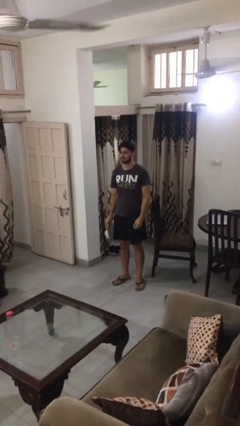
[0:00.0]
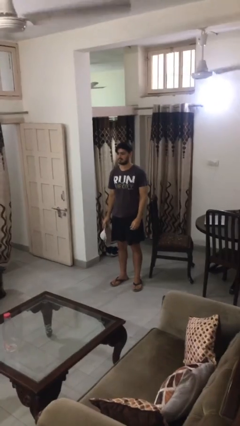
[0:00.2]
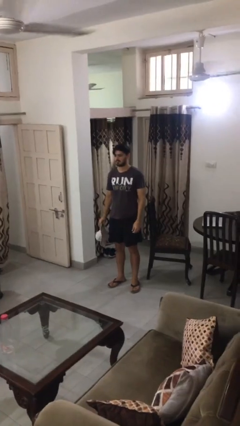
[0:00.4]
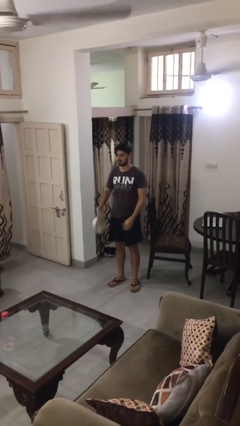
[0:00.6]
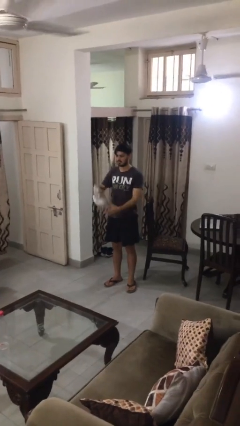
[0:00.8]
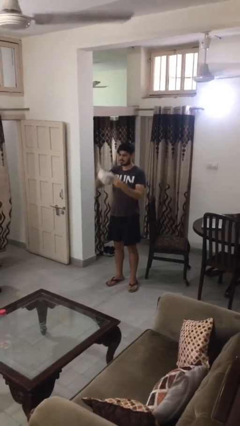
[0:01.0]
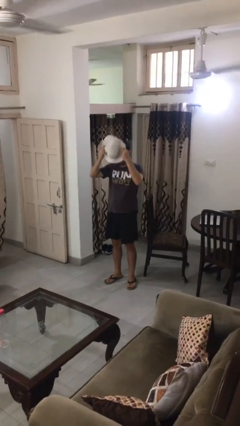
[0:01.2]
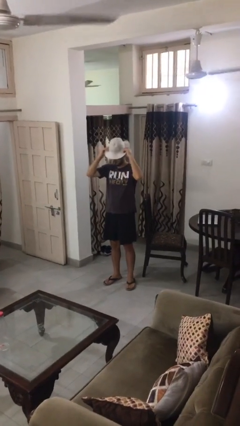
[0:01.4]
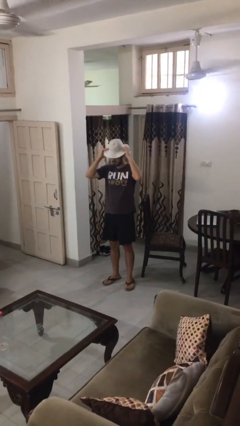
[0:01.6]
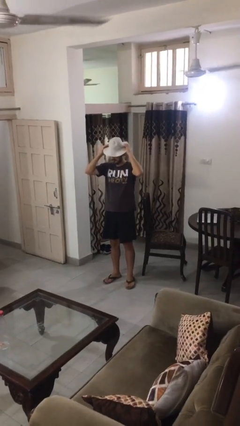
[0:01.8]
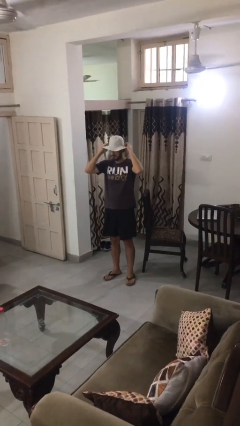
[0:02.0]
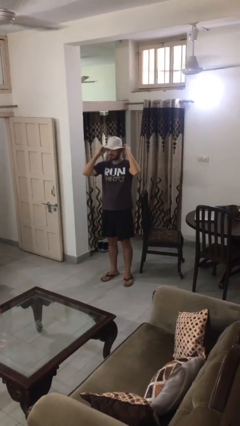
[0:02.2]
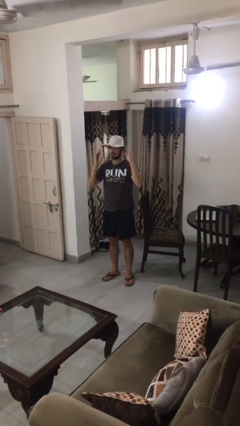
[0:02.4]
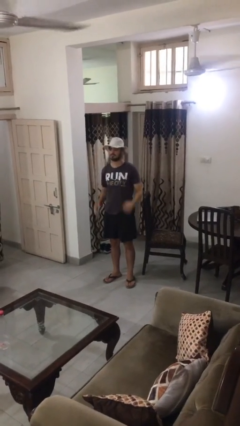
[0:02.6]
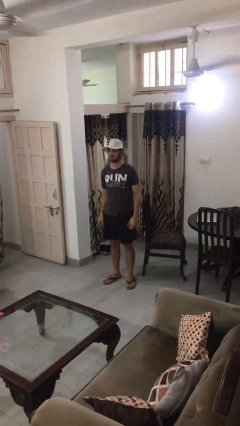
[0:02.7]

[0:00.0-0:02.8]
person puts on hat

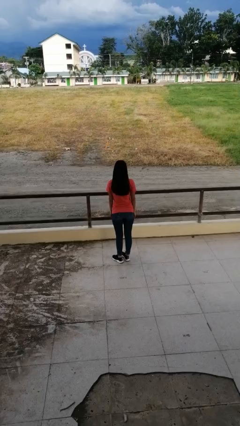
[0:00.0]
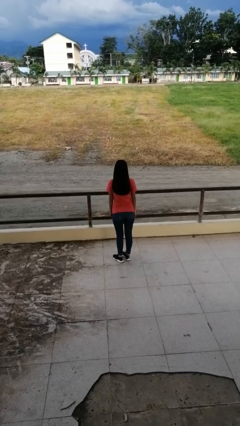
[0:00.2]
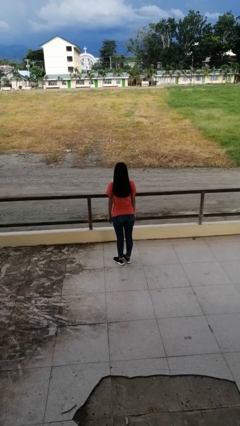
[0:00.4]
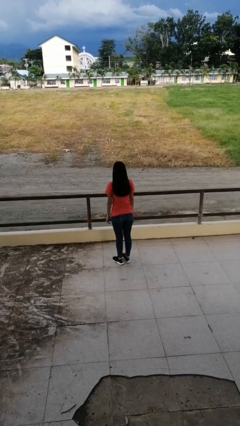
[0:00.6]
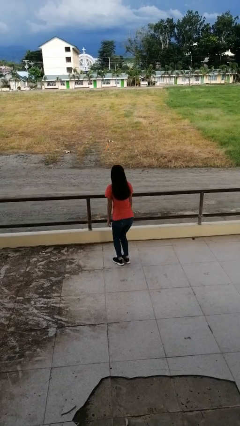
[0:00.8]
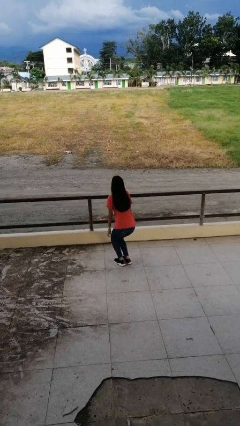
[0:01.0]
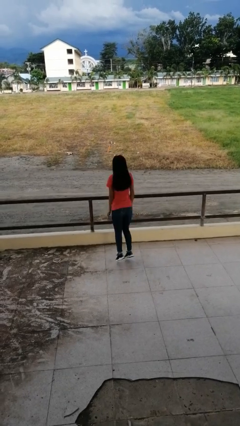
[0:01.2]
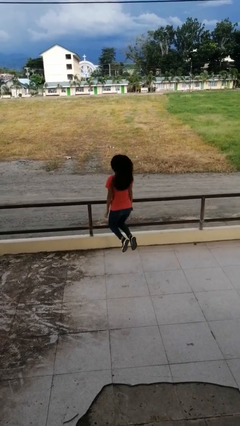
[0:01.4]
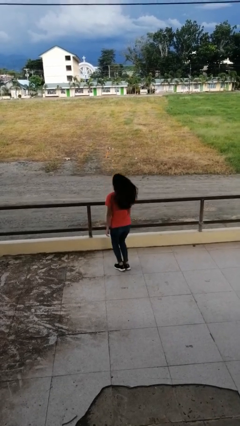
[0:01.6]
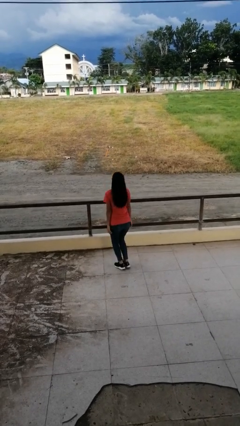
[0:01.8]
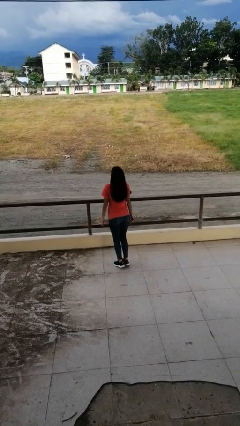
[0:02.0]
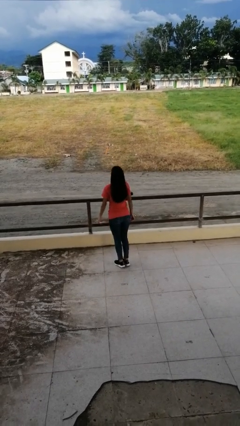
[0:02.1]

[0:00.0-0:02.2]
person jumps

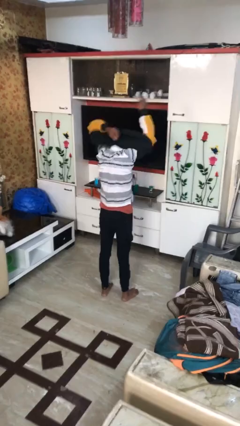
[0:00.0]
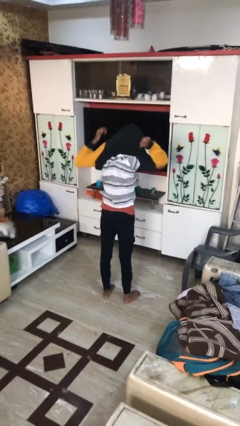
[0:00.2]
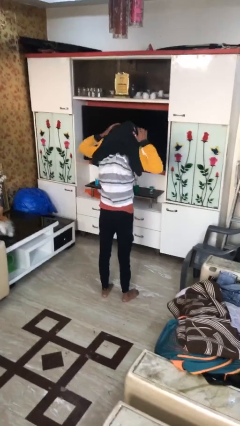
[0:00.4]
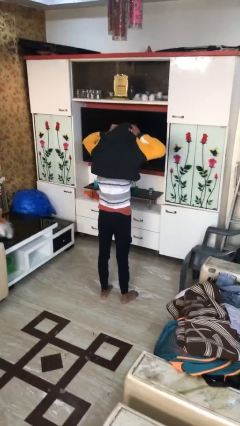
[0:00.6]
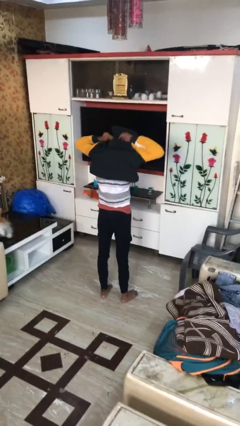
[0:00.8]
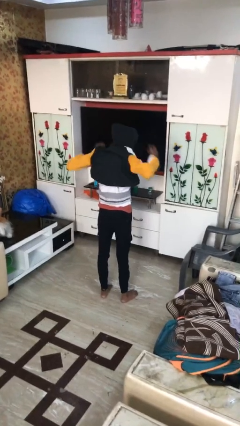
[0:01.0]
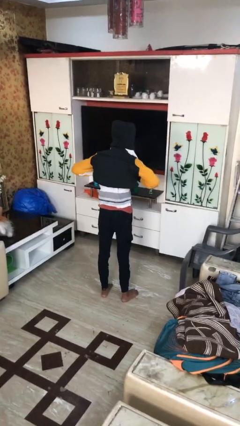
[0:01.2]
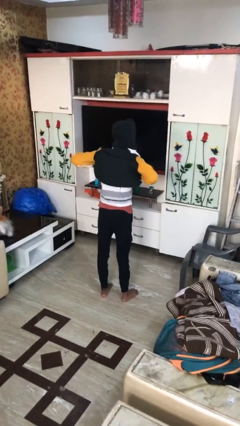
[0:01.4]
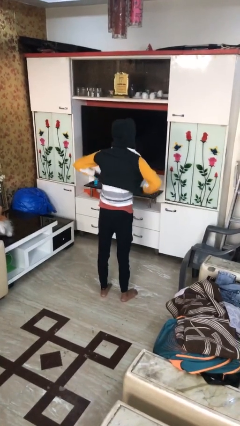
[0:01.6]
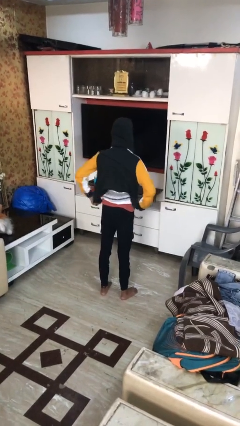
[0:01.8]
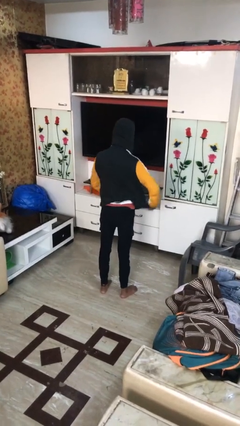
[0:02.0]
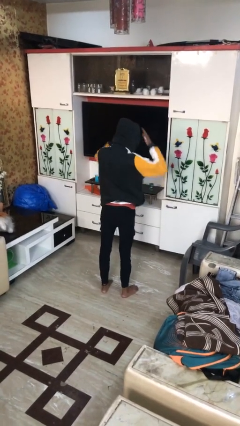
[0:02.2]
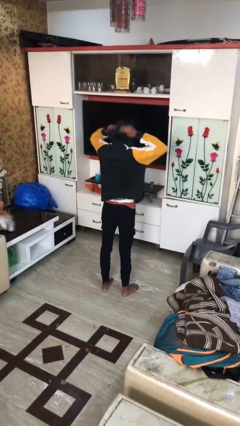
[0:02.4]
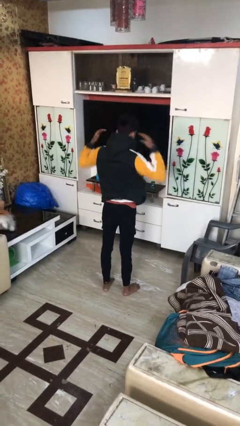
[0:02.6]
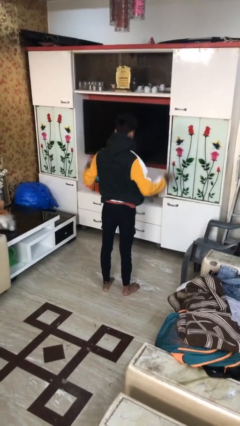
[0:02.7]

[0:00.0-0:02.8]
person puts on hoodie

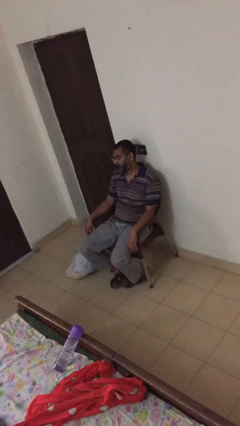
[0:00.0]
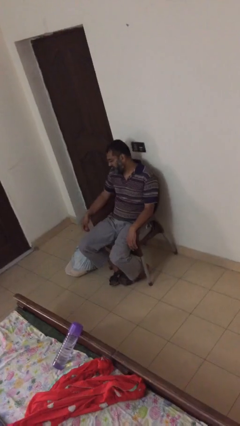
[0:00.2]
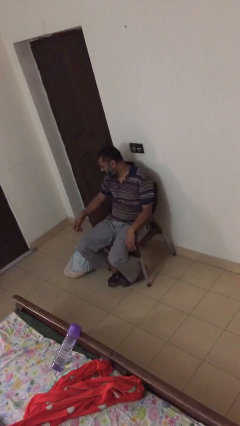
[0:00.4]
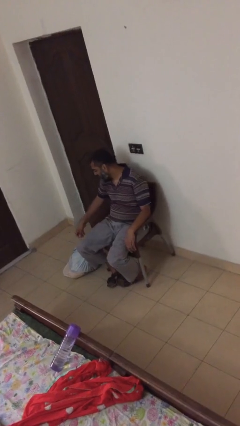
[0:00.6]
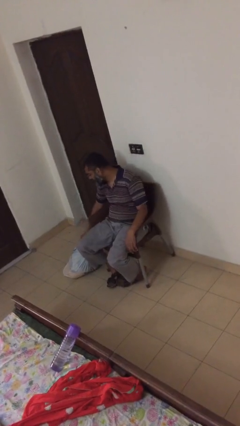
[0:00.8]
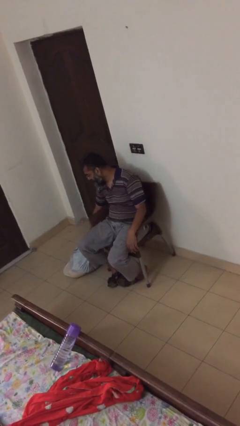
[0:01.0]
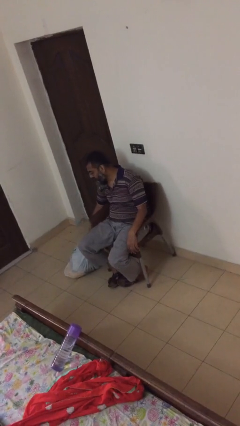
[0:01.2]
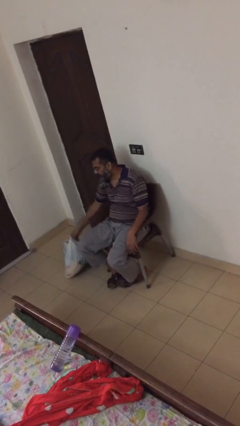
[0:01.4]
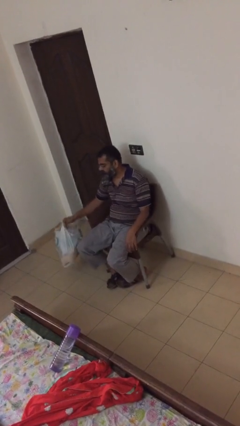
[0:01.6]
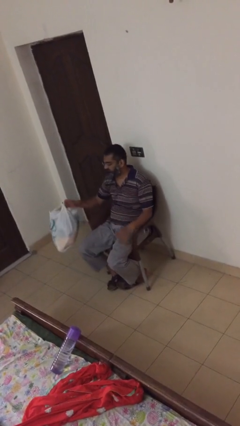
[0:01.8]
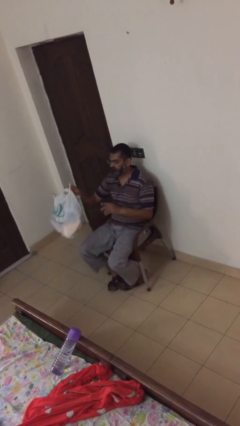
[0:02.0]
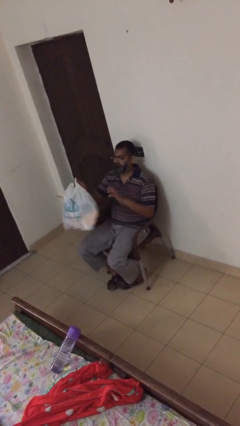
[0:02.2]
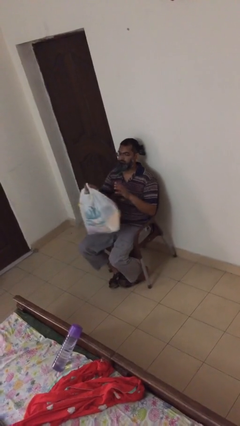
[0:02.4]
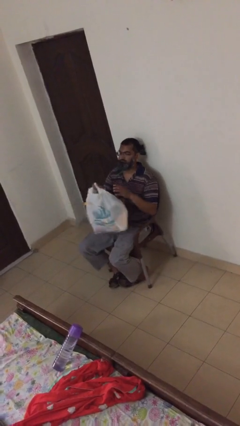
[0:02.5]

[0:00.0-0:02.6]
person picks up object from floor

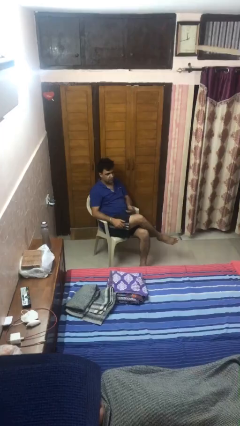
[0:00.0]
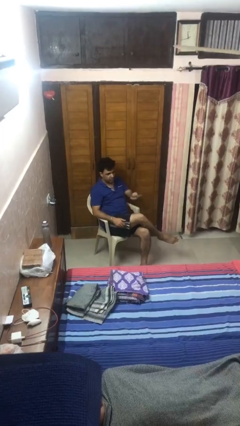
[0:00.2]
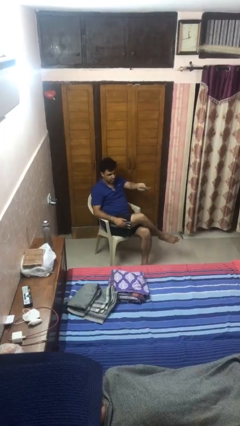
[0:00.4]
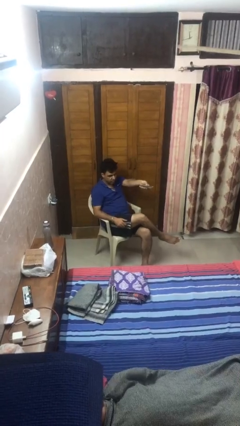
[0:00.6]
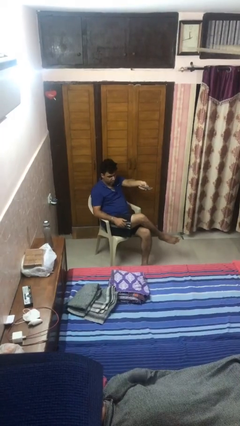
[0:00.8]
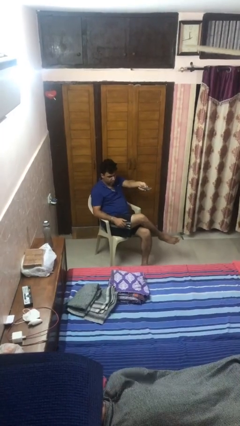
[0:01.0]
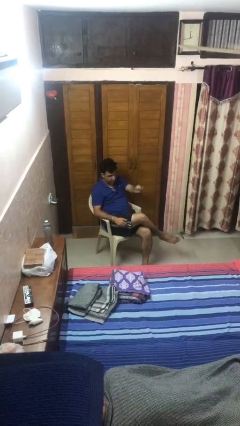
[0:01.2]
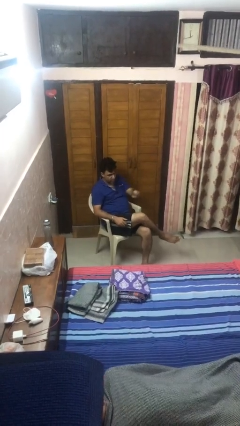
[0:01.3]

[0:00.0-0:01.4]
person uses television remote

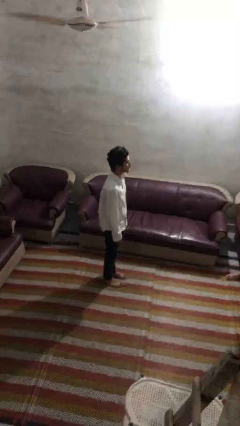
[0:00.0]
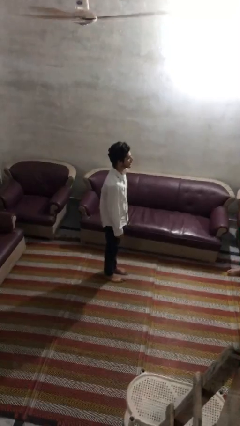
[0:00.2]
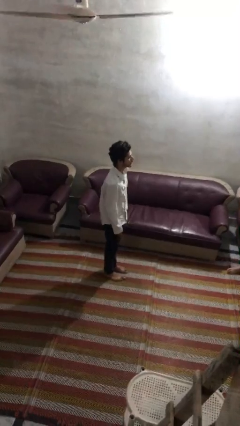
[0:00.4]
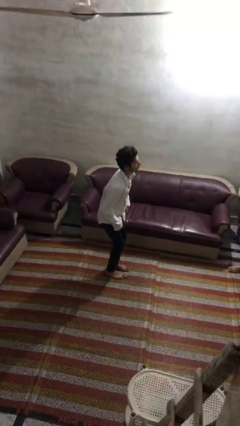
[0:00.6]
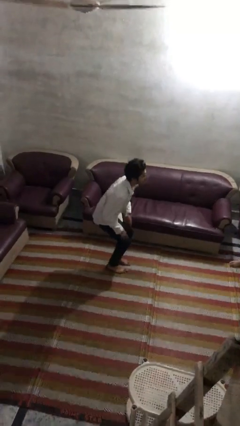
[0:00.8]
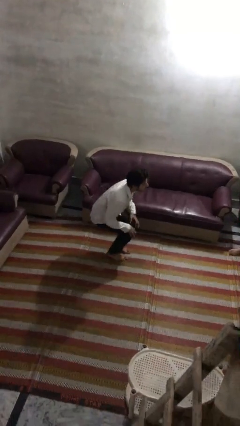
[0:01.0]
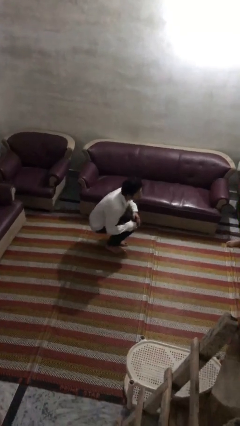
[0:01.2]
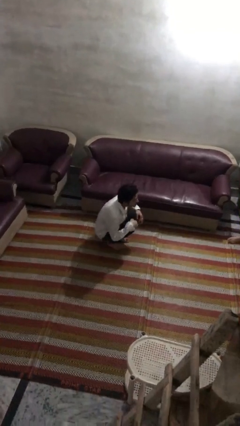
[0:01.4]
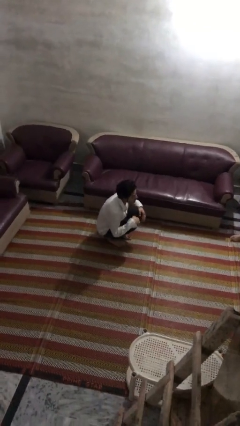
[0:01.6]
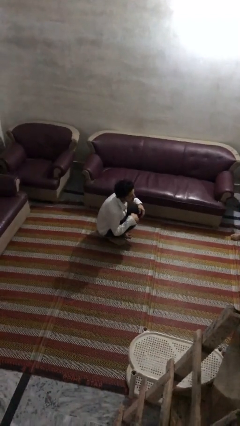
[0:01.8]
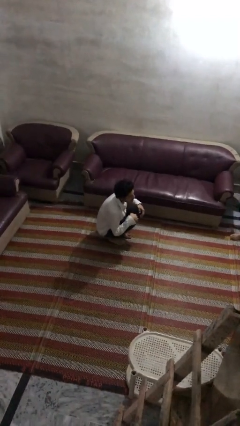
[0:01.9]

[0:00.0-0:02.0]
person squats

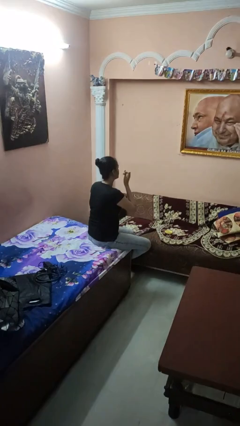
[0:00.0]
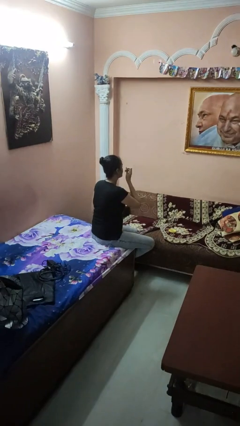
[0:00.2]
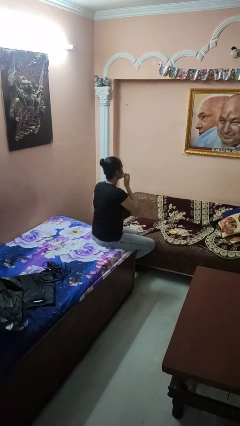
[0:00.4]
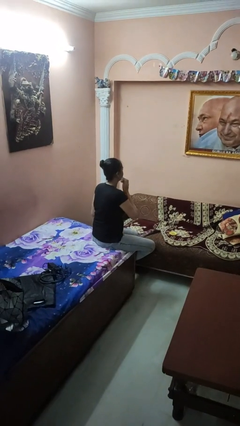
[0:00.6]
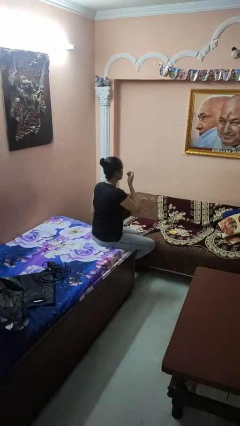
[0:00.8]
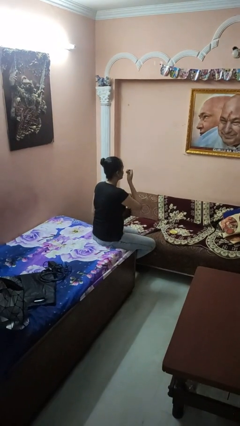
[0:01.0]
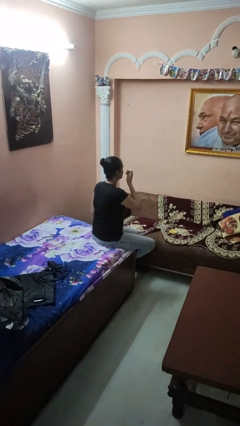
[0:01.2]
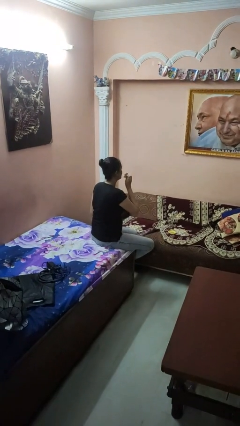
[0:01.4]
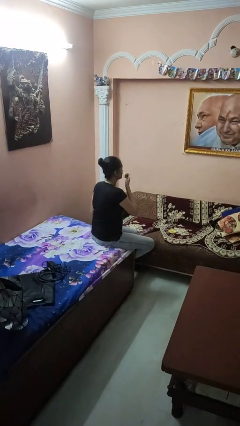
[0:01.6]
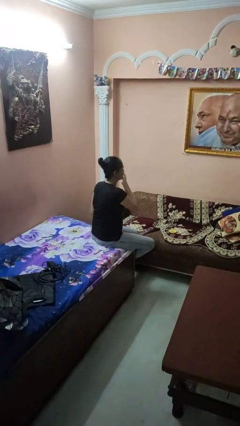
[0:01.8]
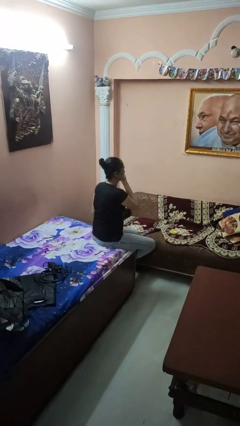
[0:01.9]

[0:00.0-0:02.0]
person applies foundation makeup

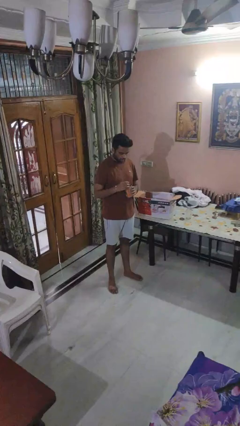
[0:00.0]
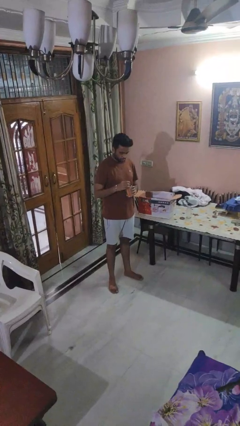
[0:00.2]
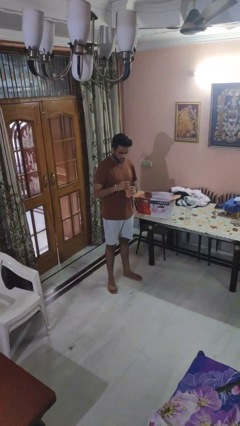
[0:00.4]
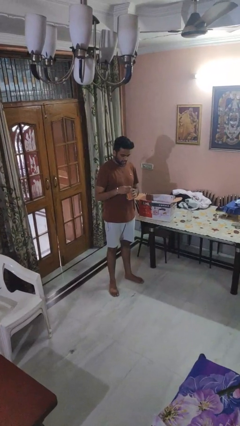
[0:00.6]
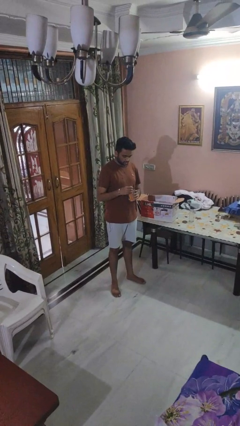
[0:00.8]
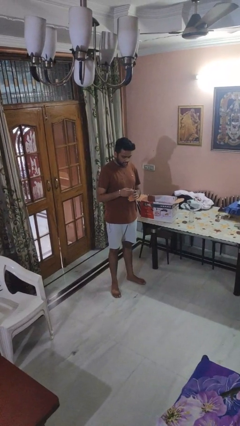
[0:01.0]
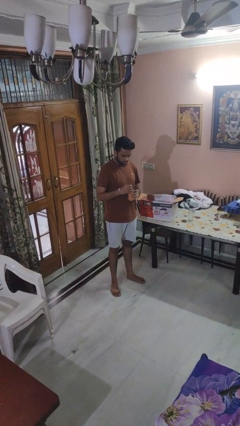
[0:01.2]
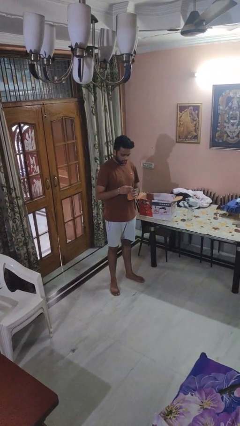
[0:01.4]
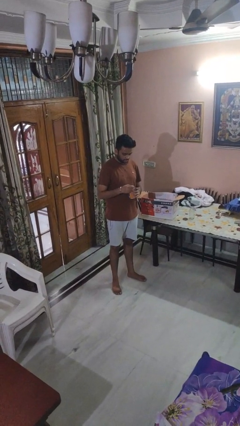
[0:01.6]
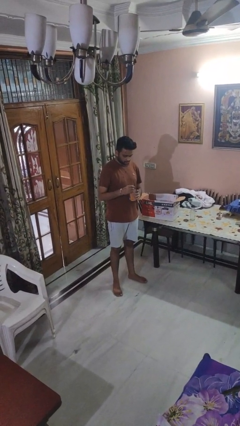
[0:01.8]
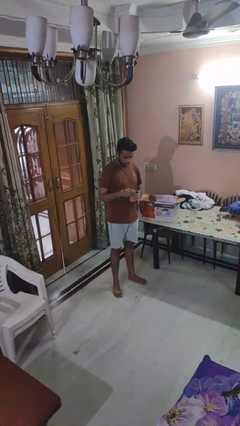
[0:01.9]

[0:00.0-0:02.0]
person opens can with can opener
